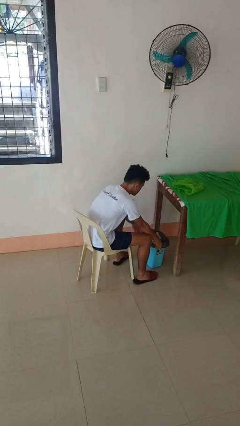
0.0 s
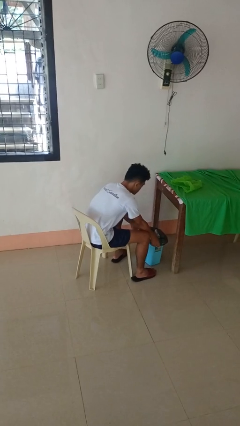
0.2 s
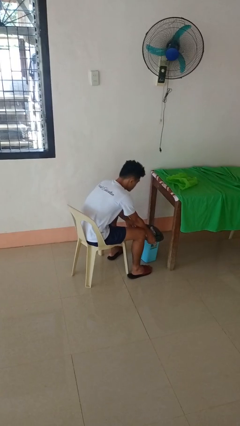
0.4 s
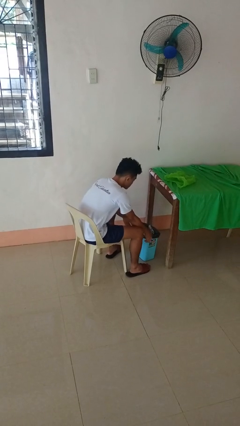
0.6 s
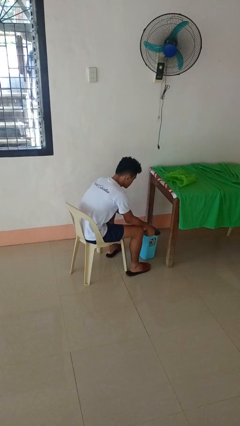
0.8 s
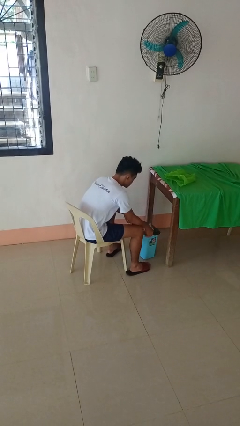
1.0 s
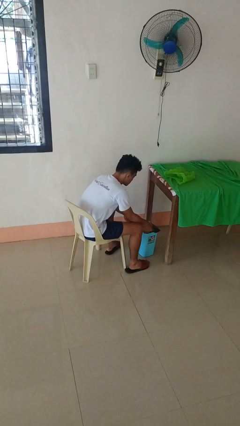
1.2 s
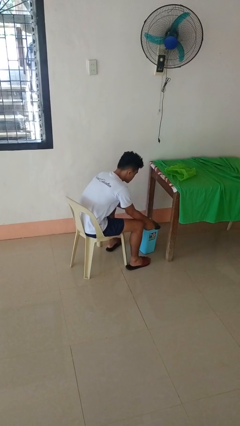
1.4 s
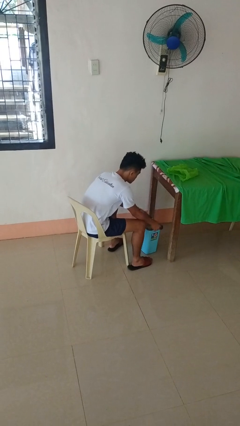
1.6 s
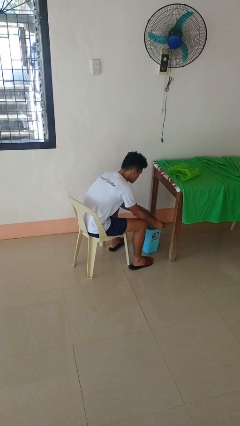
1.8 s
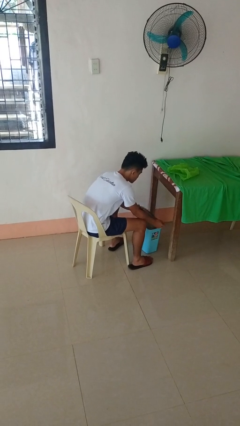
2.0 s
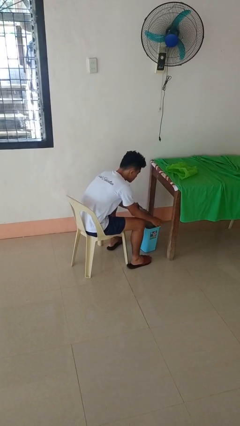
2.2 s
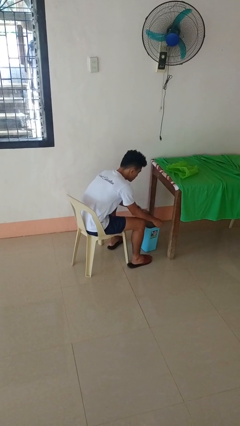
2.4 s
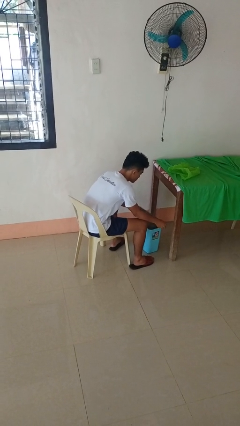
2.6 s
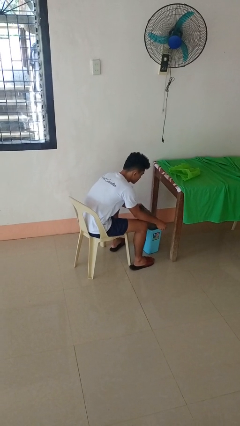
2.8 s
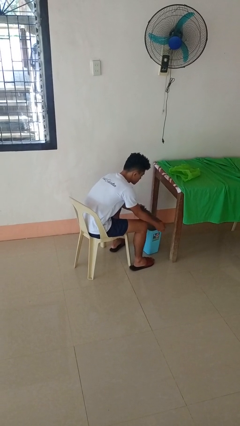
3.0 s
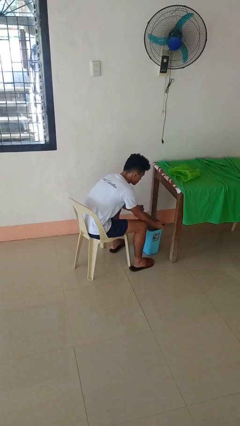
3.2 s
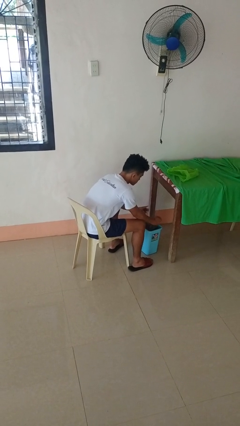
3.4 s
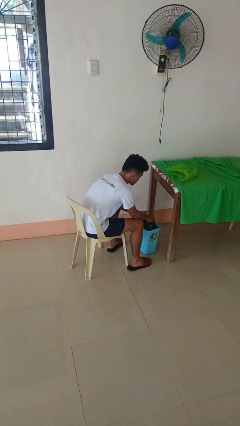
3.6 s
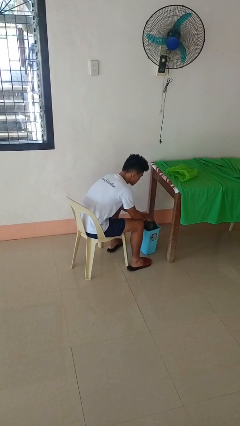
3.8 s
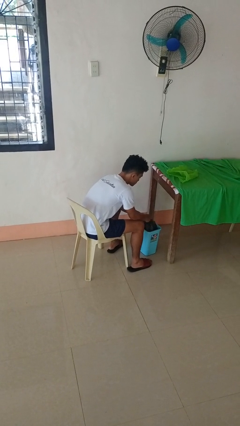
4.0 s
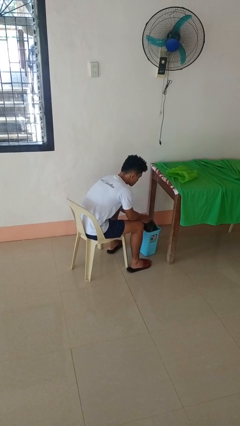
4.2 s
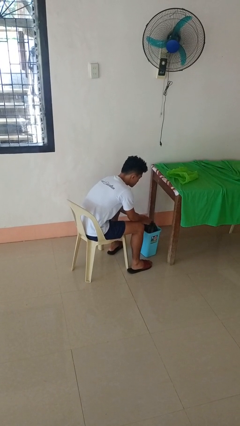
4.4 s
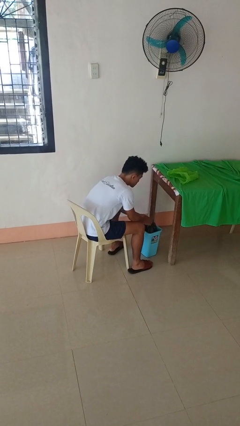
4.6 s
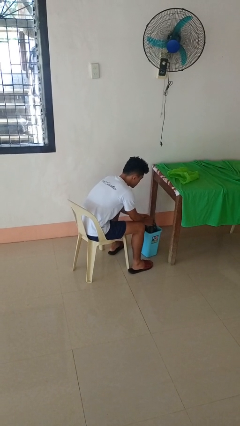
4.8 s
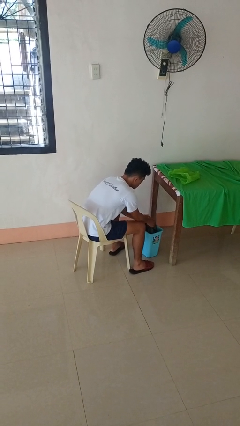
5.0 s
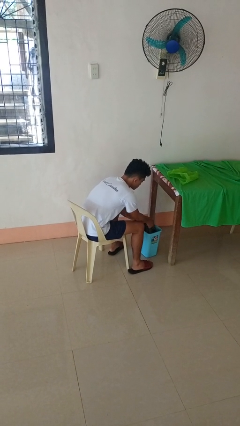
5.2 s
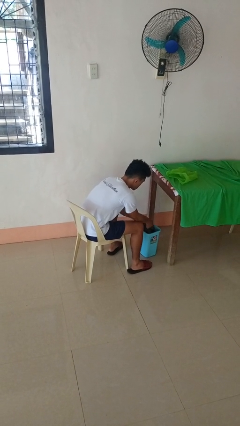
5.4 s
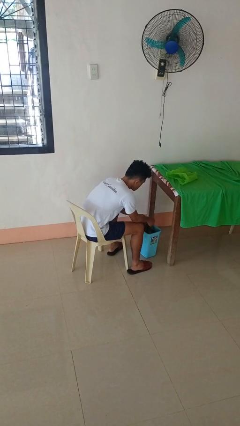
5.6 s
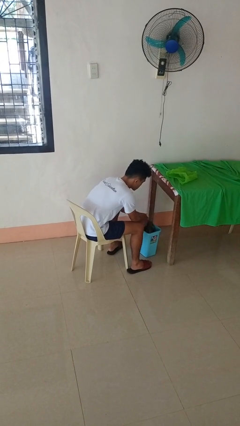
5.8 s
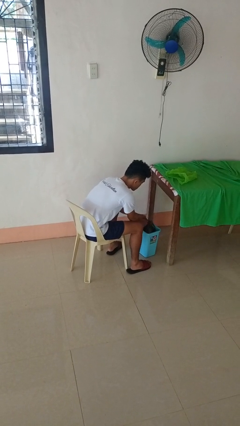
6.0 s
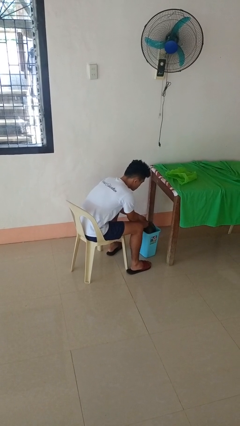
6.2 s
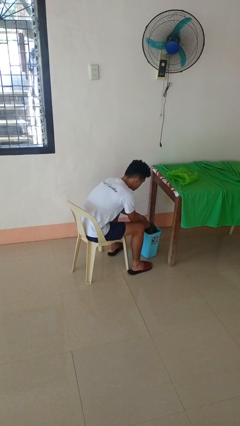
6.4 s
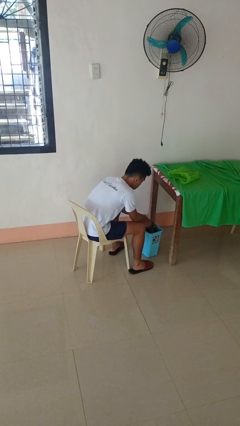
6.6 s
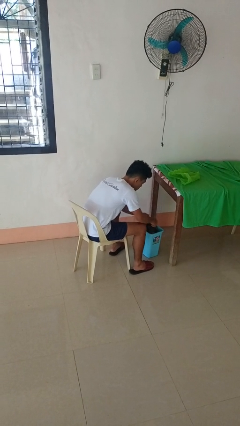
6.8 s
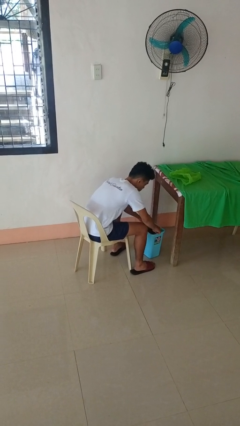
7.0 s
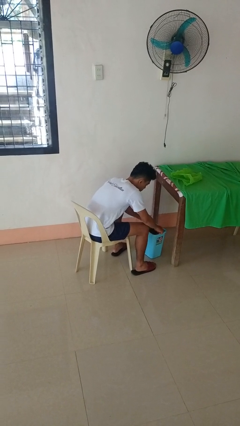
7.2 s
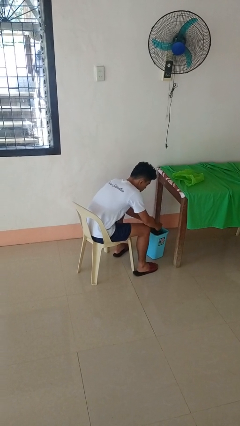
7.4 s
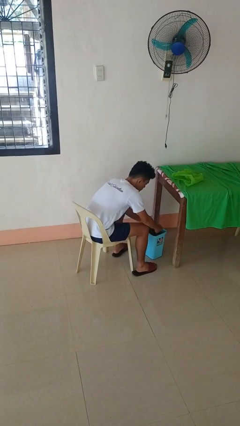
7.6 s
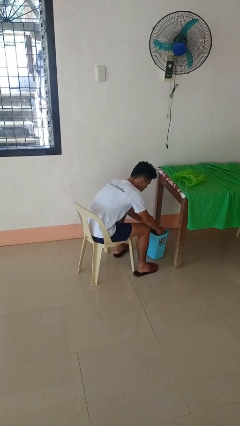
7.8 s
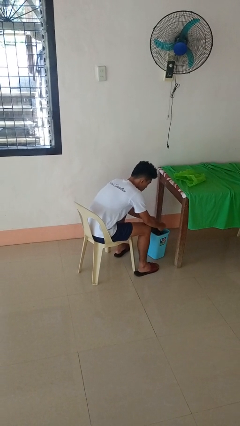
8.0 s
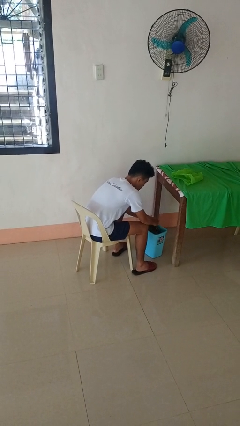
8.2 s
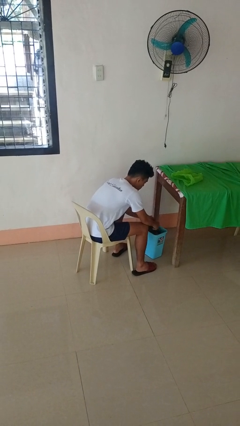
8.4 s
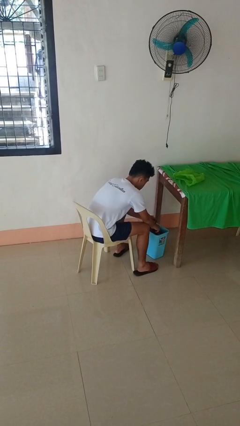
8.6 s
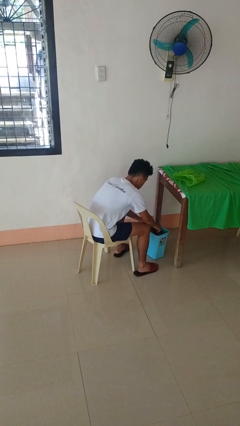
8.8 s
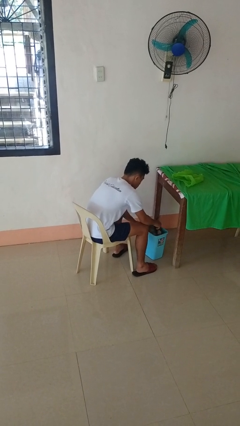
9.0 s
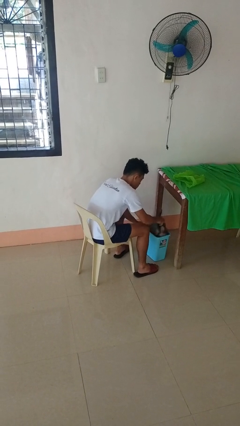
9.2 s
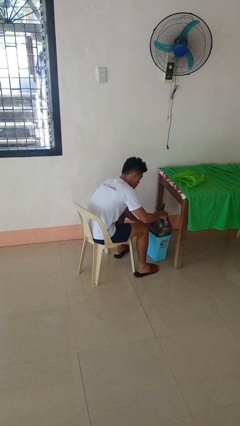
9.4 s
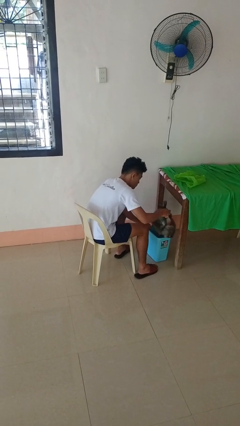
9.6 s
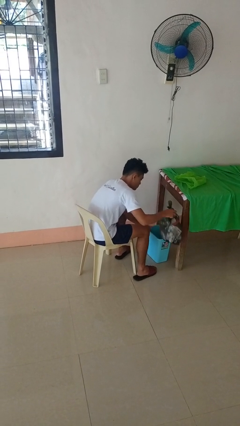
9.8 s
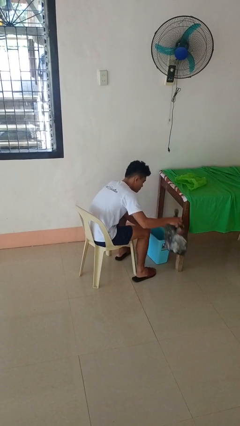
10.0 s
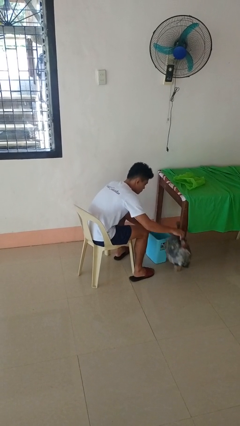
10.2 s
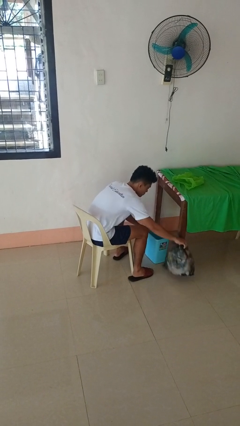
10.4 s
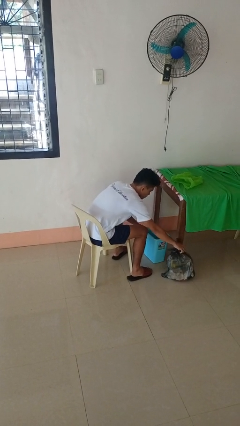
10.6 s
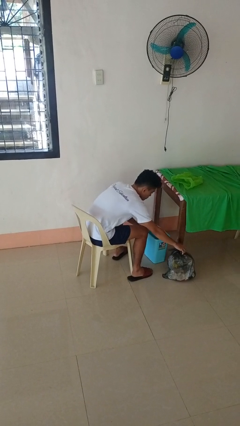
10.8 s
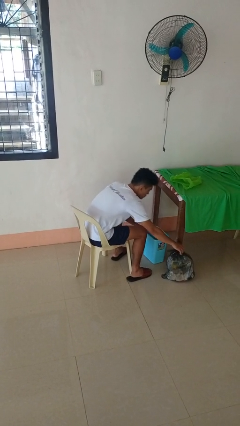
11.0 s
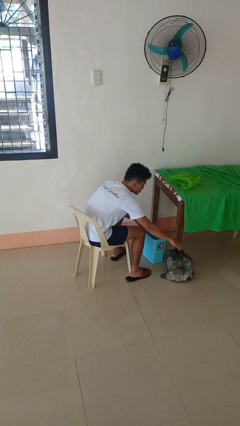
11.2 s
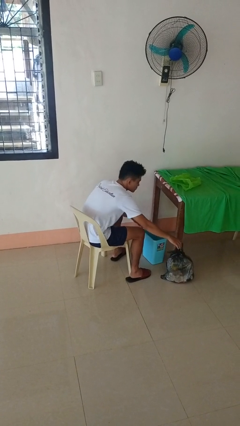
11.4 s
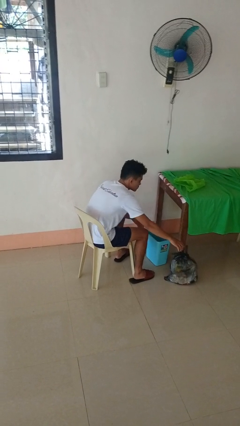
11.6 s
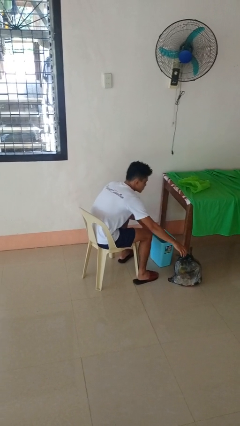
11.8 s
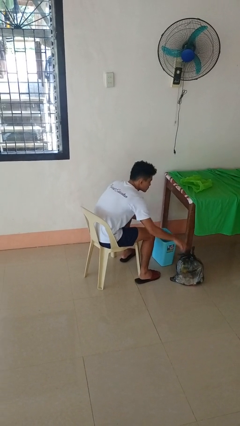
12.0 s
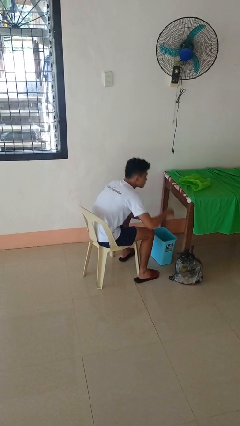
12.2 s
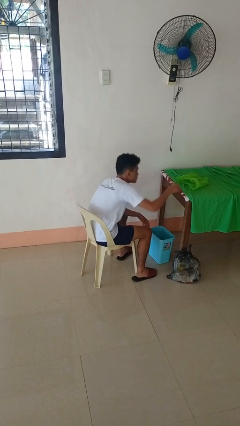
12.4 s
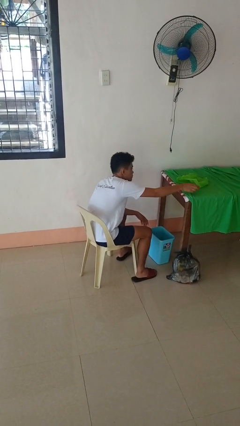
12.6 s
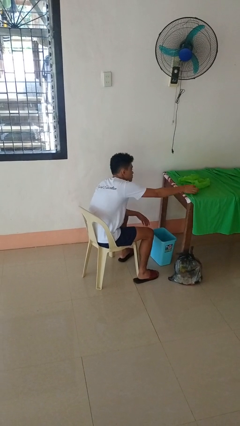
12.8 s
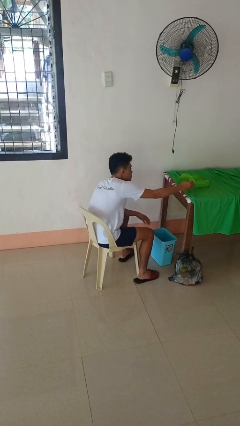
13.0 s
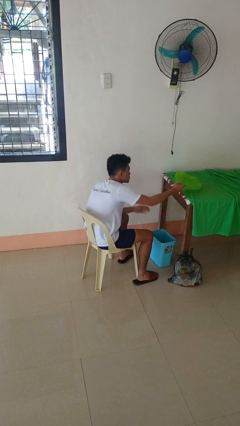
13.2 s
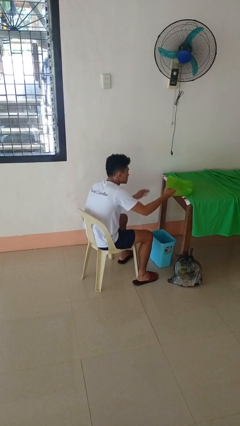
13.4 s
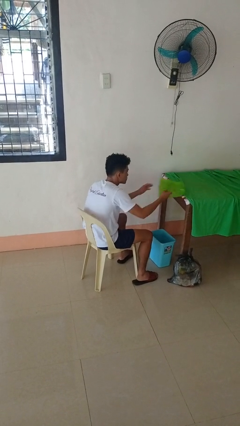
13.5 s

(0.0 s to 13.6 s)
person removes trashbag from trashcan

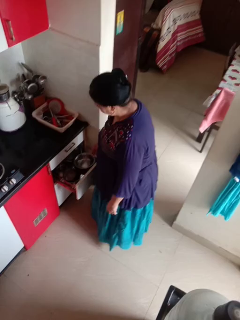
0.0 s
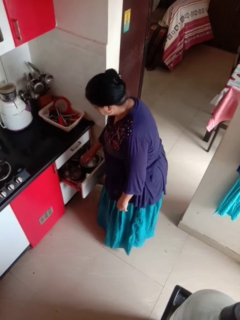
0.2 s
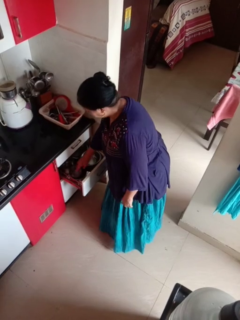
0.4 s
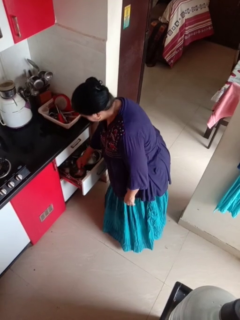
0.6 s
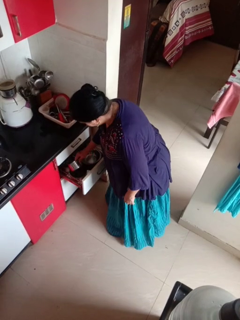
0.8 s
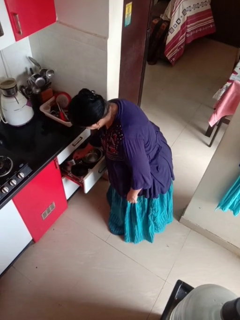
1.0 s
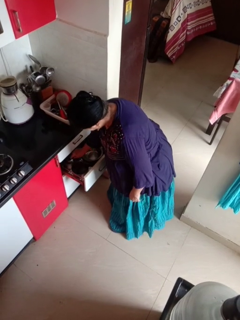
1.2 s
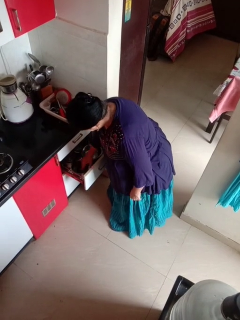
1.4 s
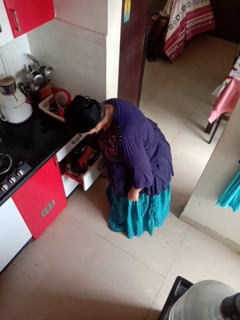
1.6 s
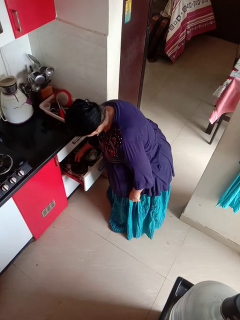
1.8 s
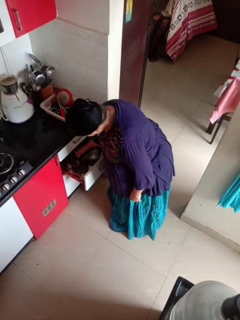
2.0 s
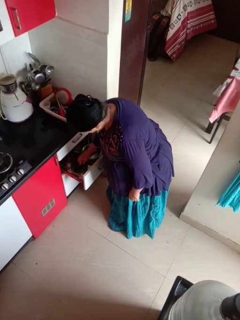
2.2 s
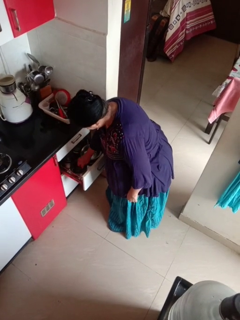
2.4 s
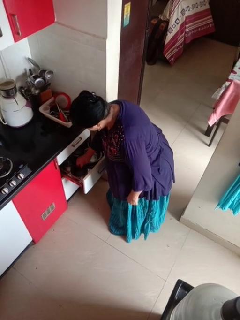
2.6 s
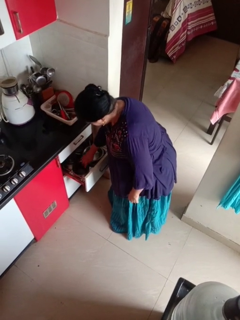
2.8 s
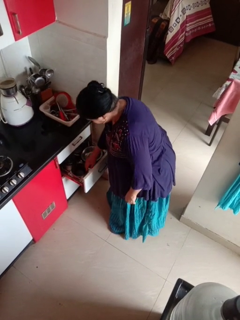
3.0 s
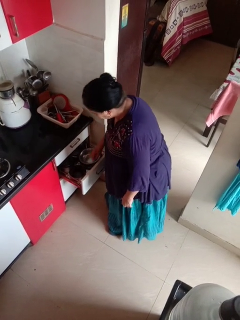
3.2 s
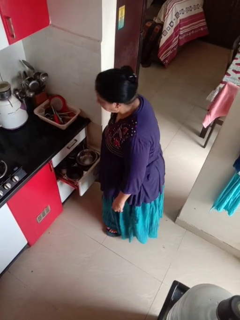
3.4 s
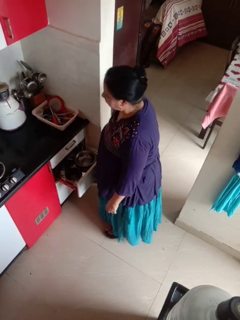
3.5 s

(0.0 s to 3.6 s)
person searches in kitchen drawer

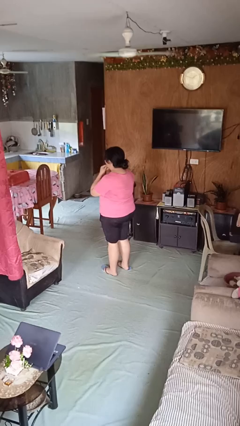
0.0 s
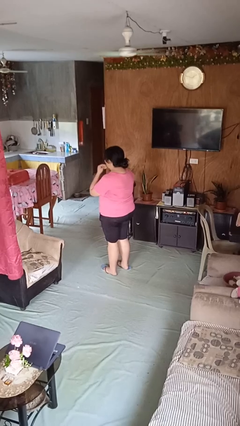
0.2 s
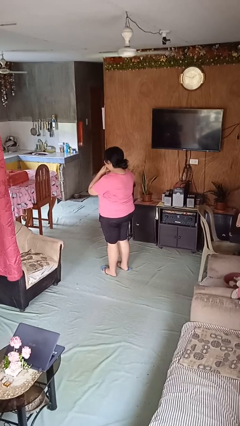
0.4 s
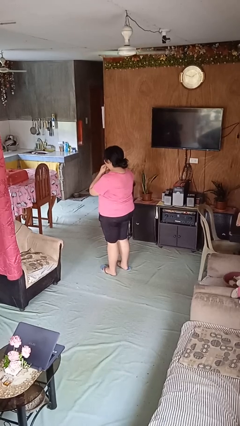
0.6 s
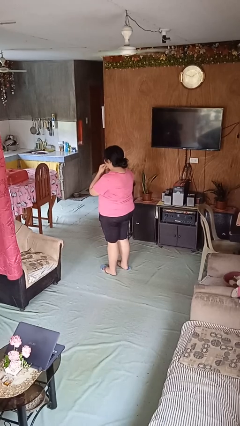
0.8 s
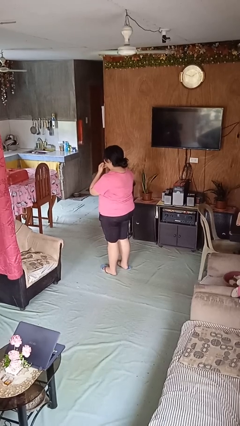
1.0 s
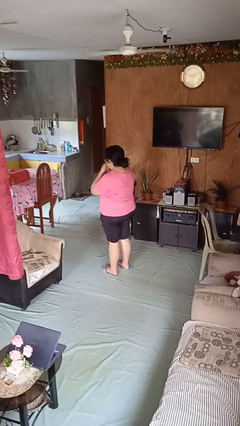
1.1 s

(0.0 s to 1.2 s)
person strokes chin

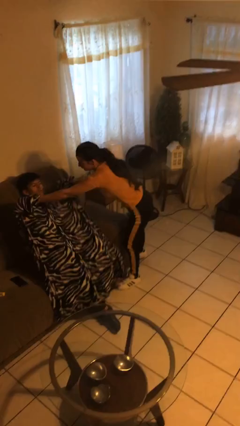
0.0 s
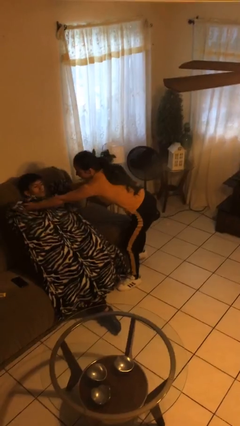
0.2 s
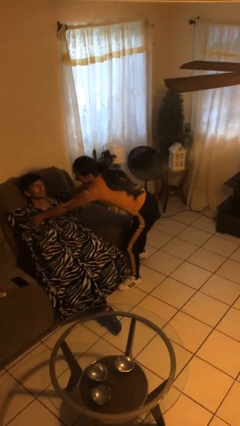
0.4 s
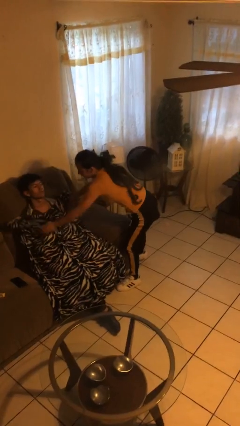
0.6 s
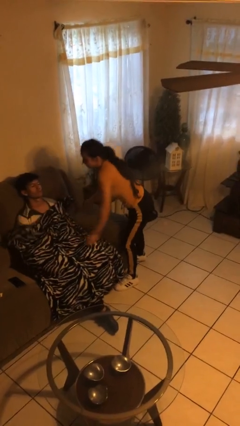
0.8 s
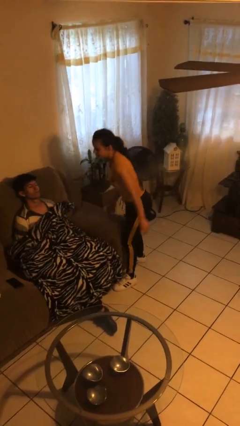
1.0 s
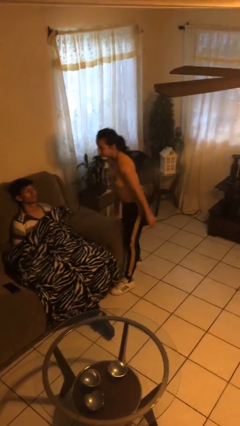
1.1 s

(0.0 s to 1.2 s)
person covers friend with blanket
